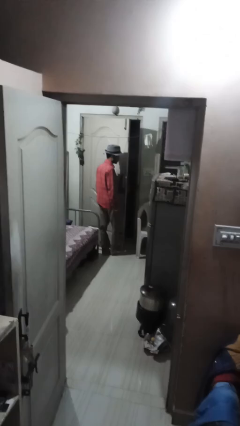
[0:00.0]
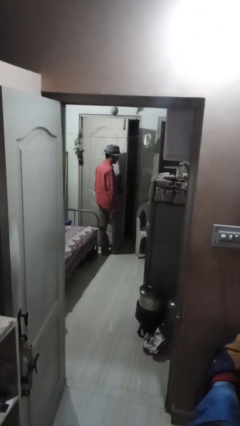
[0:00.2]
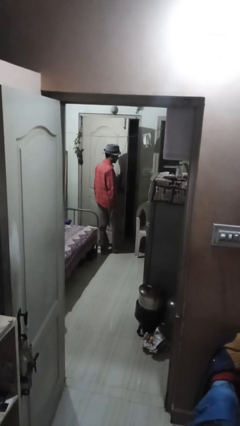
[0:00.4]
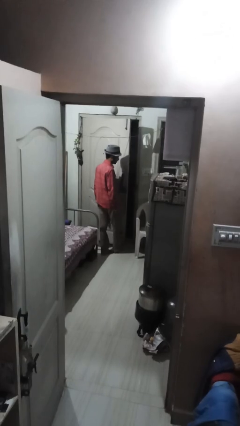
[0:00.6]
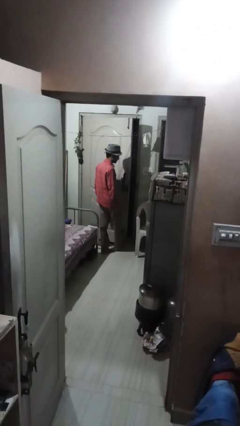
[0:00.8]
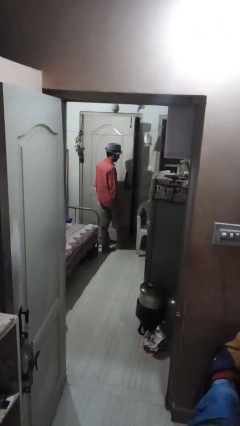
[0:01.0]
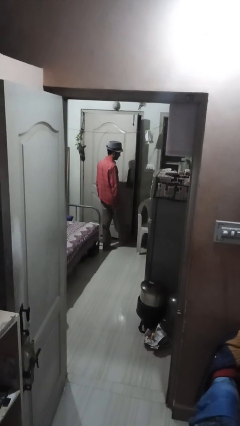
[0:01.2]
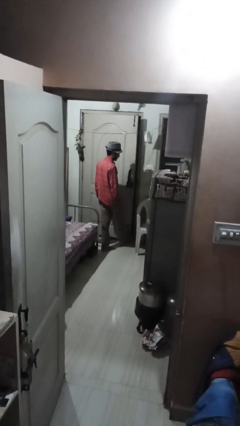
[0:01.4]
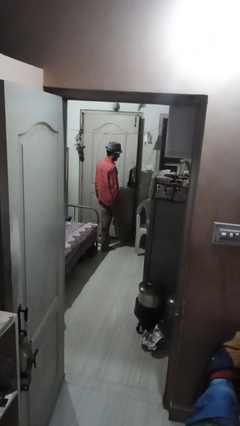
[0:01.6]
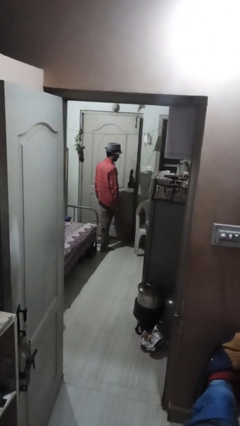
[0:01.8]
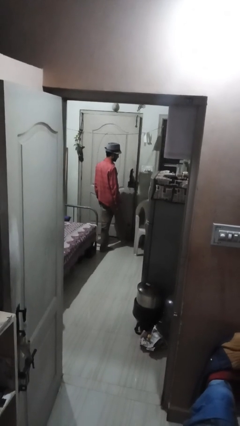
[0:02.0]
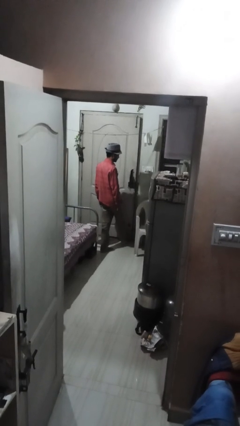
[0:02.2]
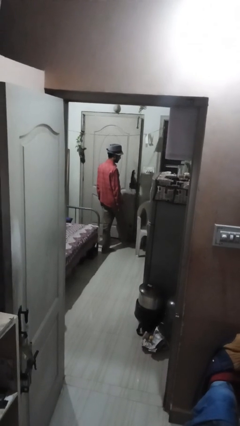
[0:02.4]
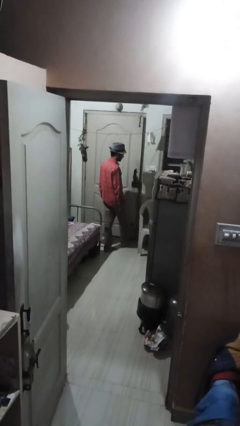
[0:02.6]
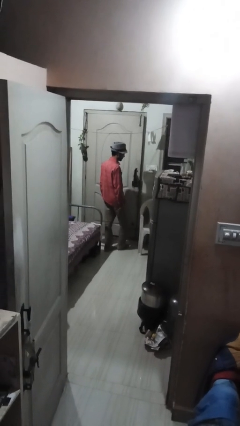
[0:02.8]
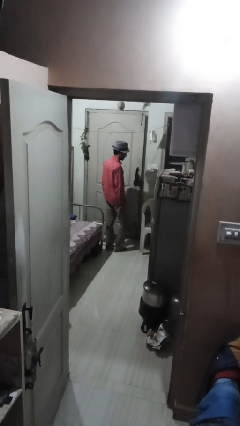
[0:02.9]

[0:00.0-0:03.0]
person closes door with foot

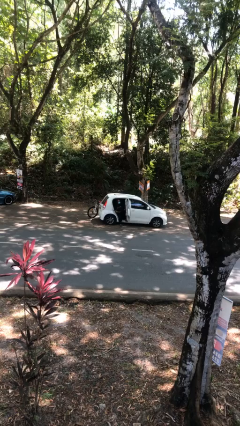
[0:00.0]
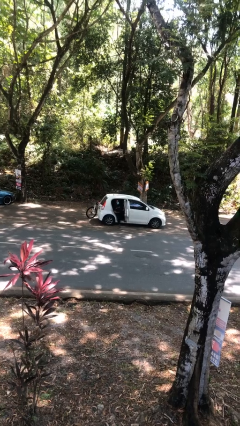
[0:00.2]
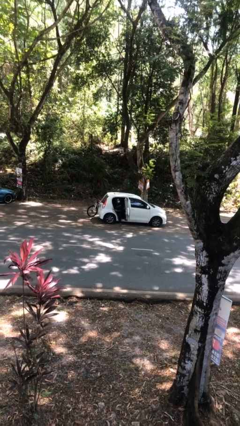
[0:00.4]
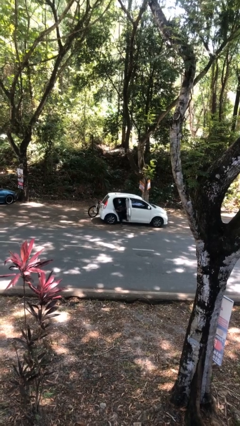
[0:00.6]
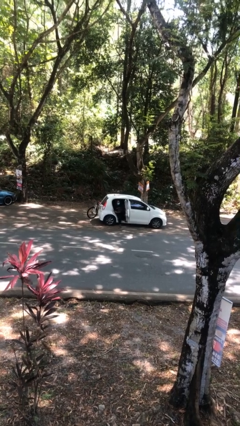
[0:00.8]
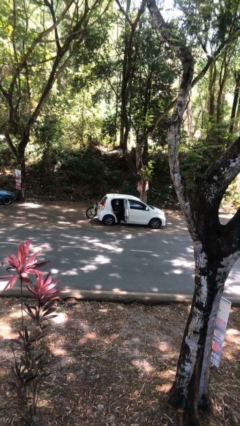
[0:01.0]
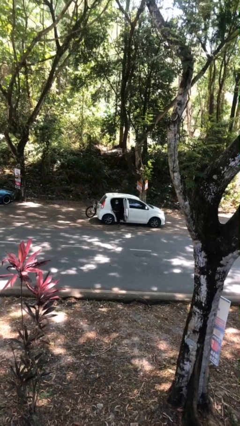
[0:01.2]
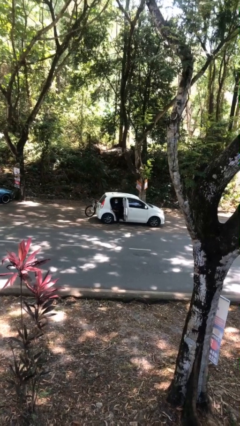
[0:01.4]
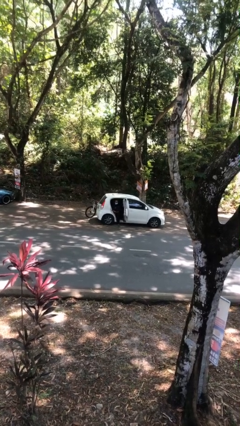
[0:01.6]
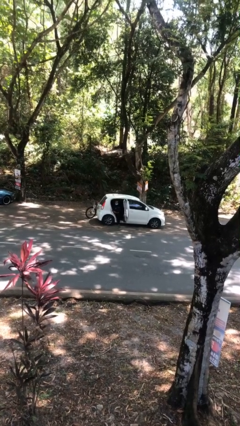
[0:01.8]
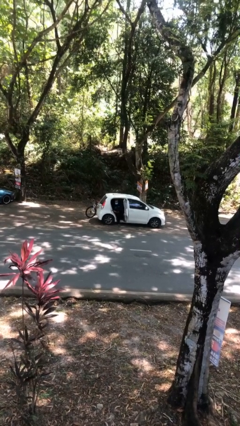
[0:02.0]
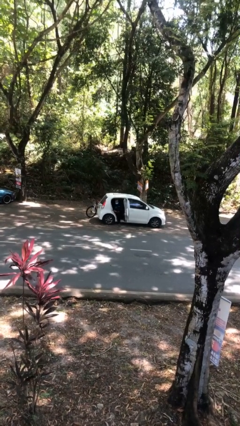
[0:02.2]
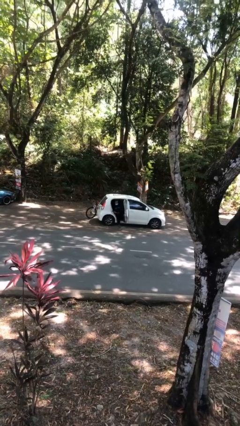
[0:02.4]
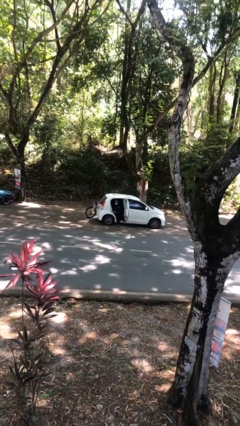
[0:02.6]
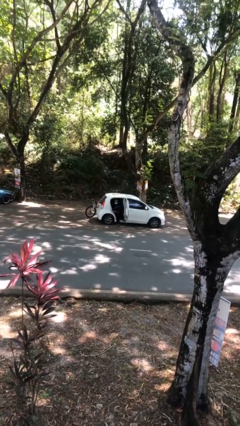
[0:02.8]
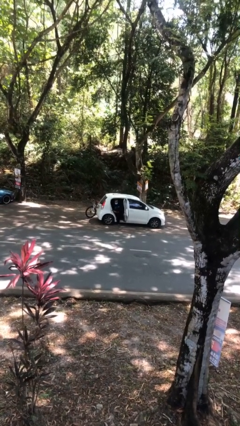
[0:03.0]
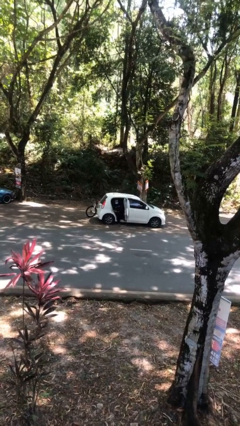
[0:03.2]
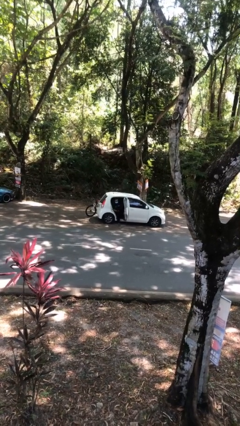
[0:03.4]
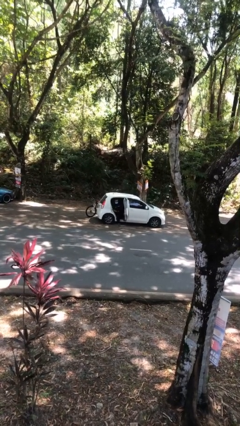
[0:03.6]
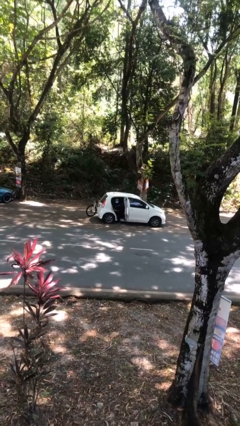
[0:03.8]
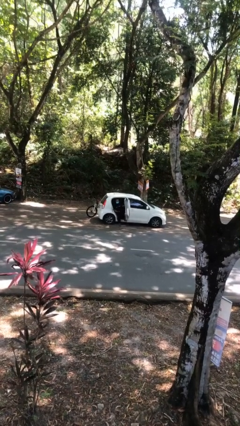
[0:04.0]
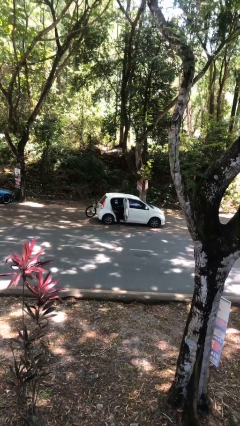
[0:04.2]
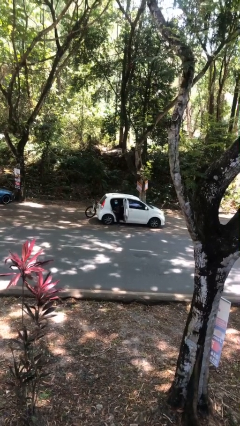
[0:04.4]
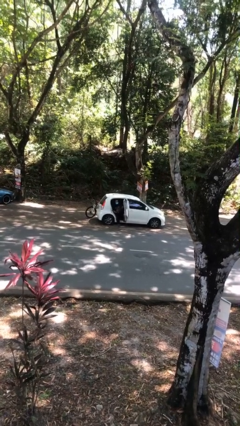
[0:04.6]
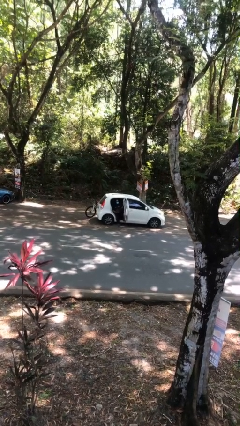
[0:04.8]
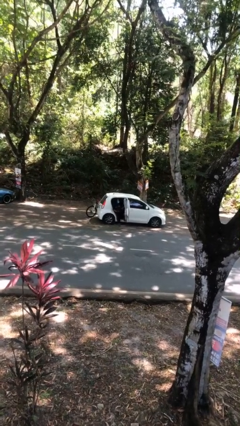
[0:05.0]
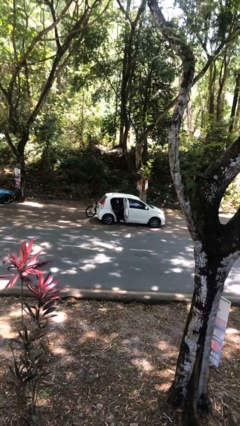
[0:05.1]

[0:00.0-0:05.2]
person interacts with laptop

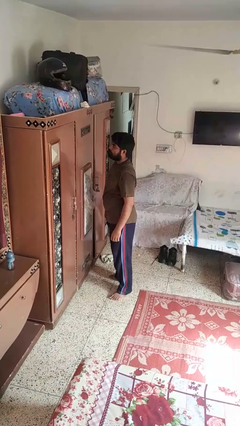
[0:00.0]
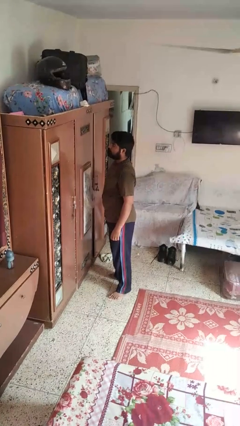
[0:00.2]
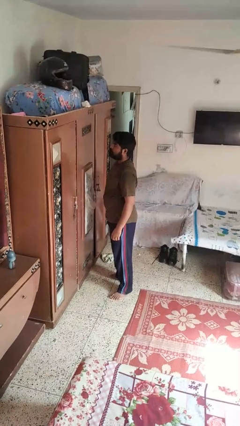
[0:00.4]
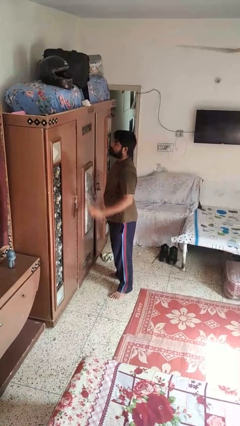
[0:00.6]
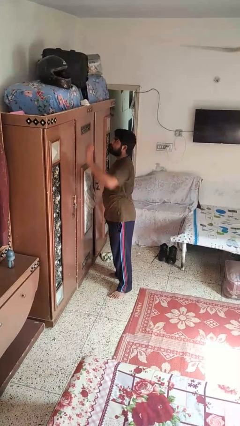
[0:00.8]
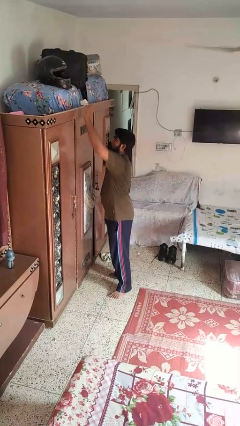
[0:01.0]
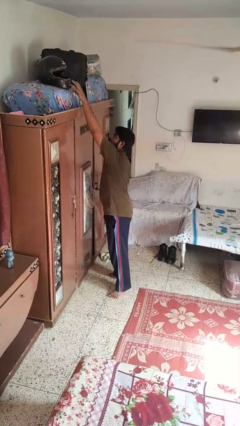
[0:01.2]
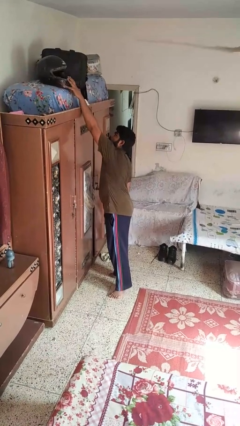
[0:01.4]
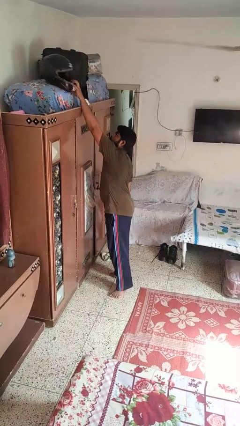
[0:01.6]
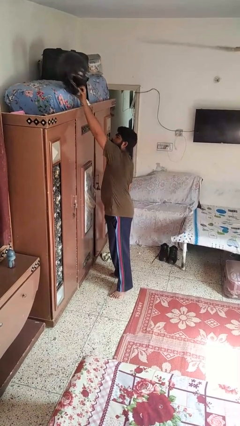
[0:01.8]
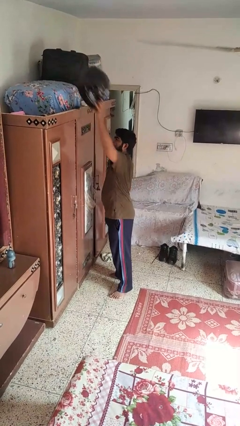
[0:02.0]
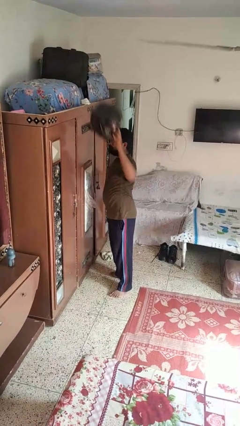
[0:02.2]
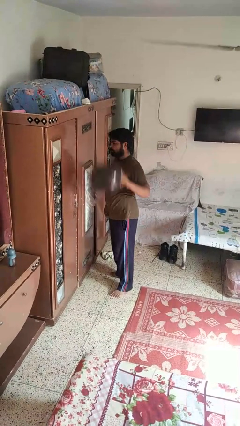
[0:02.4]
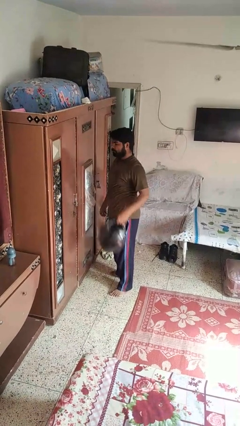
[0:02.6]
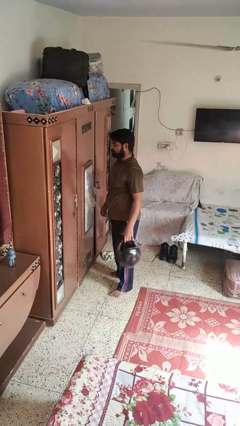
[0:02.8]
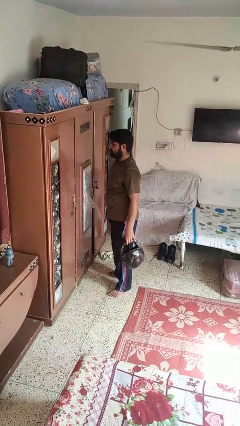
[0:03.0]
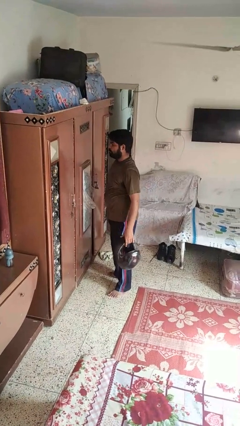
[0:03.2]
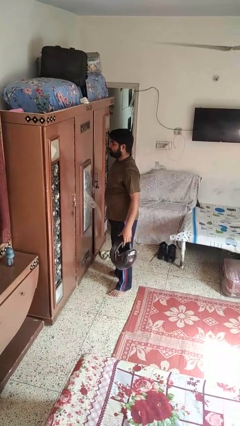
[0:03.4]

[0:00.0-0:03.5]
person picks up object from shelf

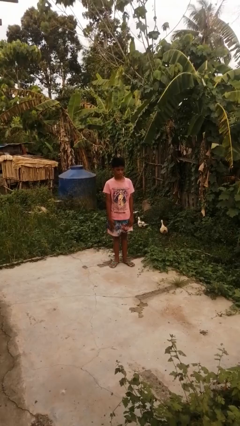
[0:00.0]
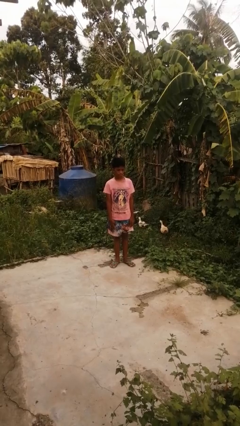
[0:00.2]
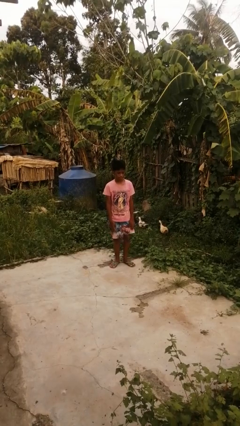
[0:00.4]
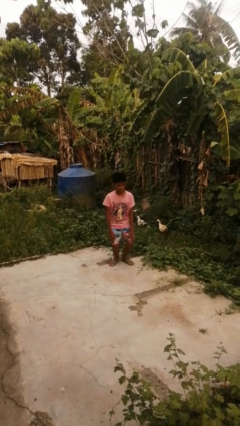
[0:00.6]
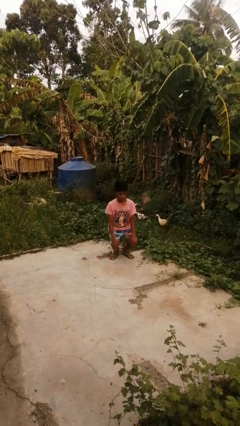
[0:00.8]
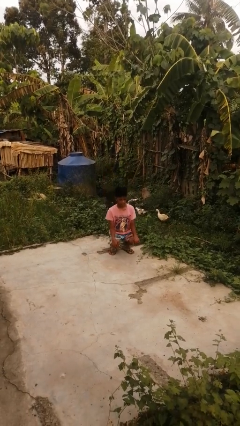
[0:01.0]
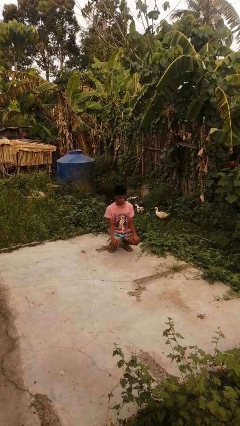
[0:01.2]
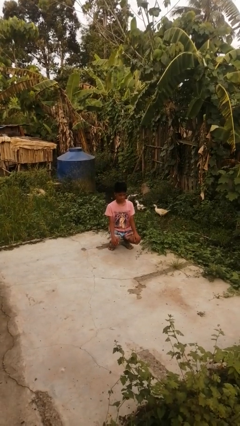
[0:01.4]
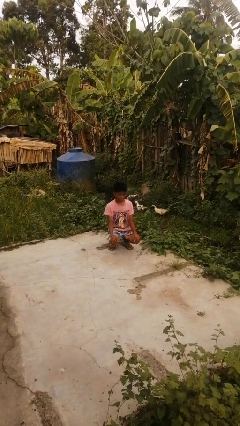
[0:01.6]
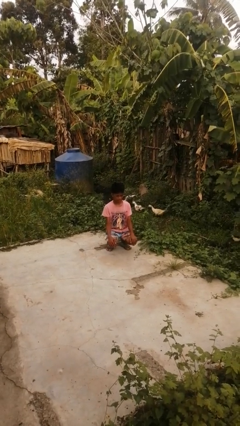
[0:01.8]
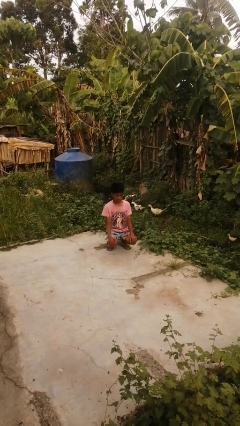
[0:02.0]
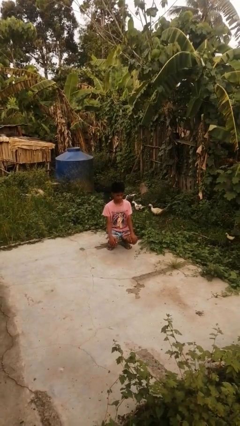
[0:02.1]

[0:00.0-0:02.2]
person squats

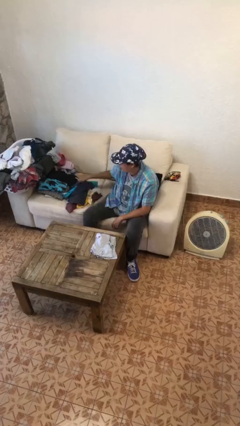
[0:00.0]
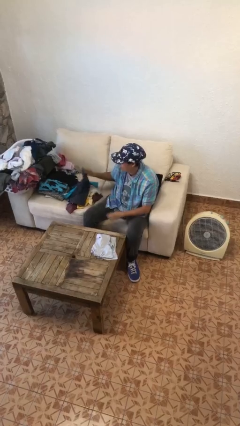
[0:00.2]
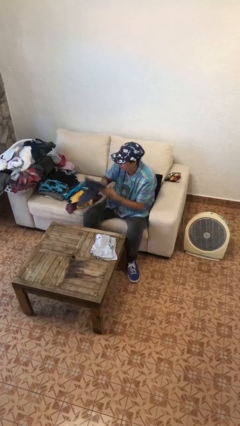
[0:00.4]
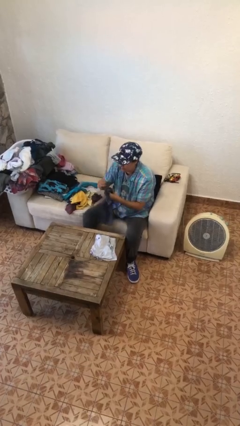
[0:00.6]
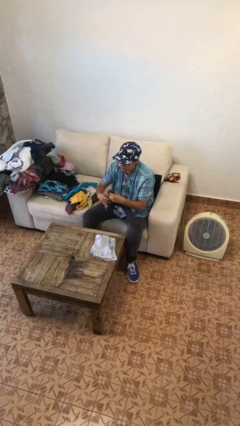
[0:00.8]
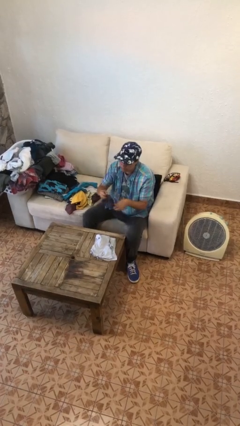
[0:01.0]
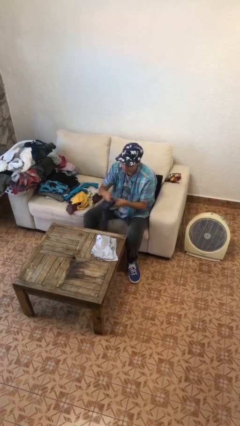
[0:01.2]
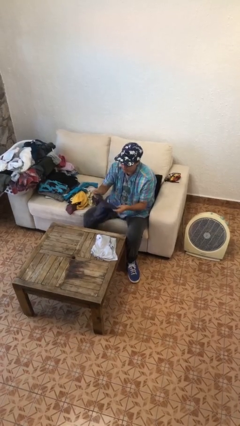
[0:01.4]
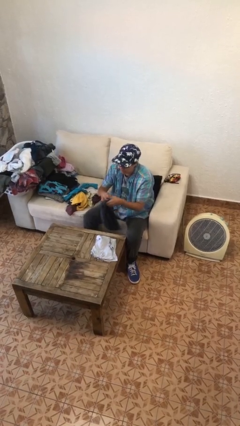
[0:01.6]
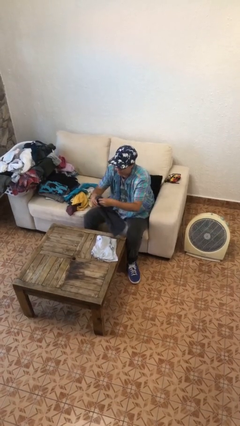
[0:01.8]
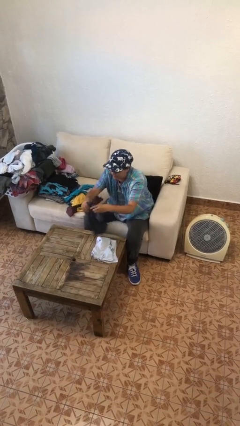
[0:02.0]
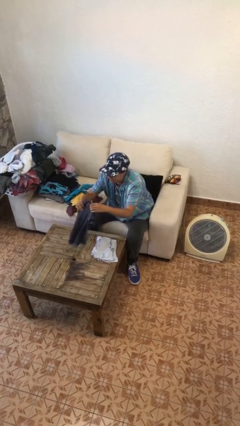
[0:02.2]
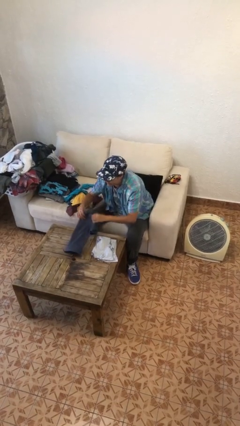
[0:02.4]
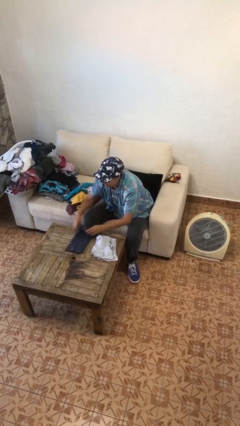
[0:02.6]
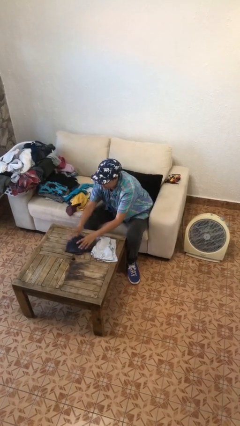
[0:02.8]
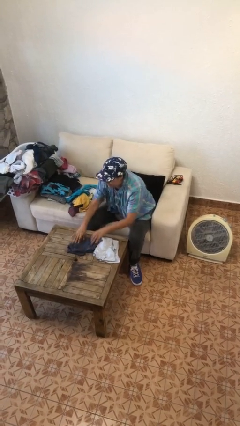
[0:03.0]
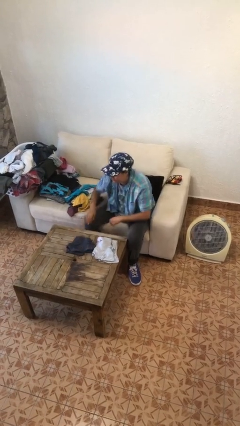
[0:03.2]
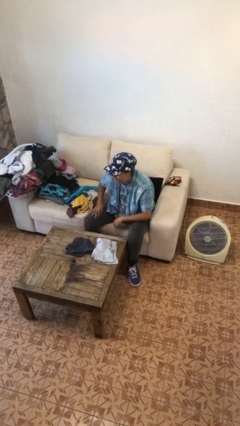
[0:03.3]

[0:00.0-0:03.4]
person folds shirt

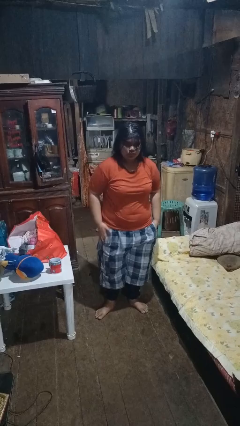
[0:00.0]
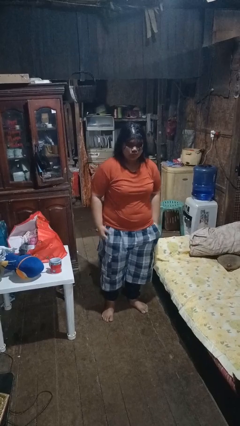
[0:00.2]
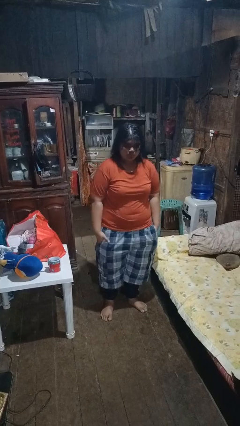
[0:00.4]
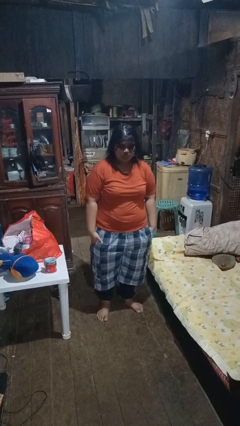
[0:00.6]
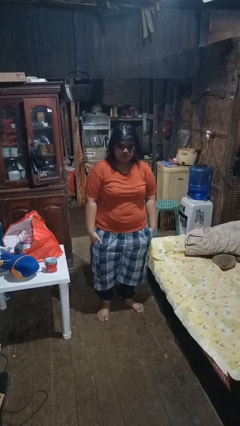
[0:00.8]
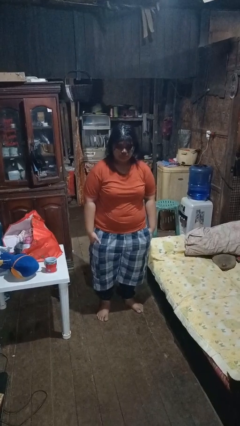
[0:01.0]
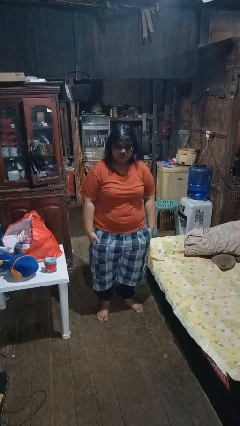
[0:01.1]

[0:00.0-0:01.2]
person puts hands in back pockets
